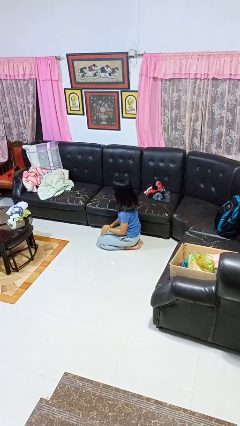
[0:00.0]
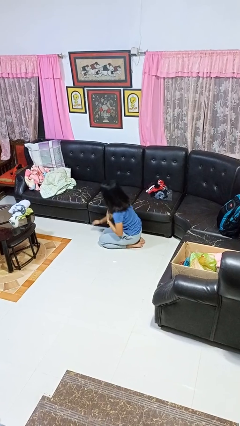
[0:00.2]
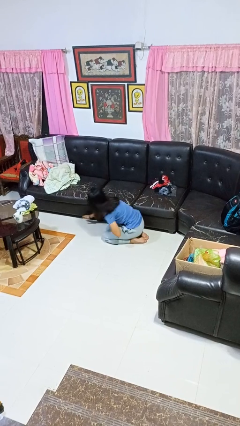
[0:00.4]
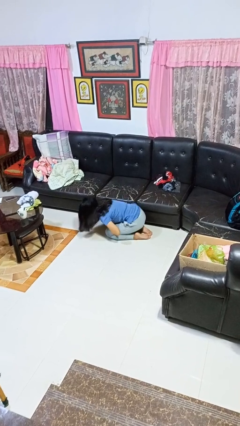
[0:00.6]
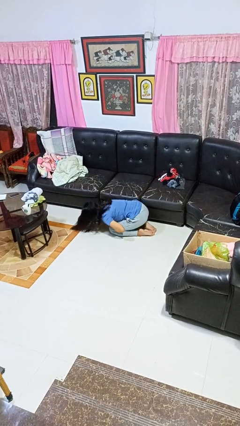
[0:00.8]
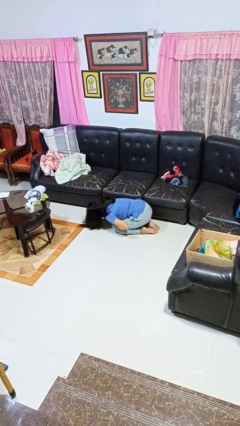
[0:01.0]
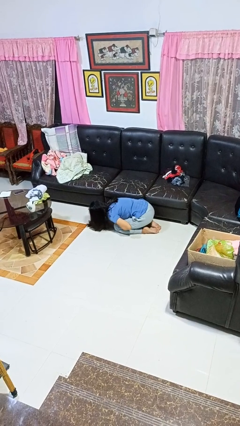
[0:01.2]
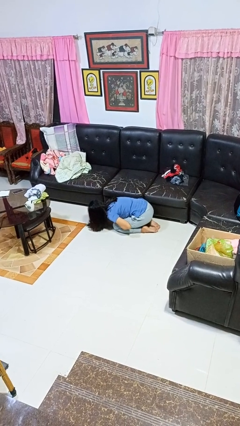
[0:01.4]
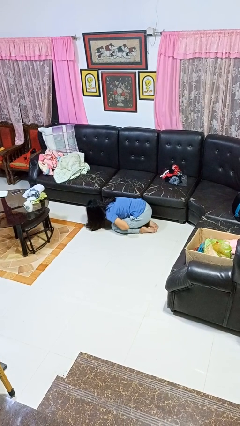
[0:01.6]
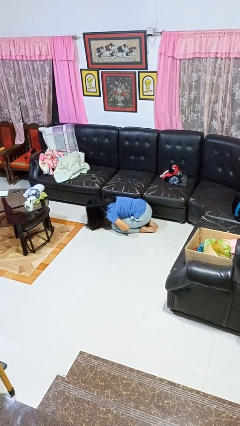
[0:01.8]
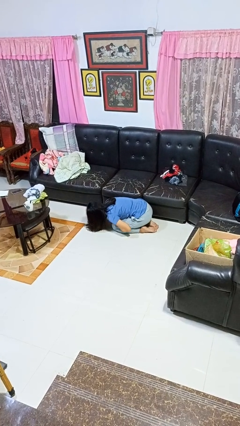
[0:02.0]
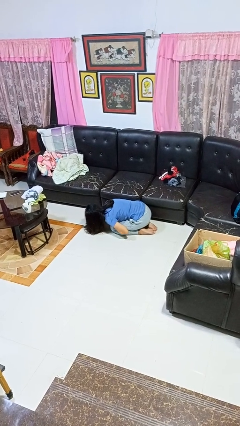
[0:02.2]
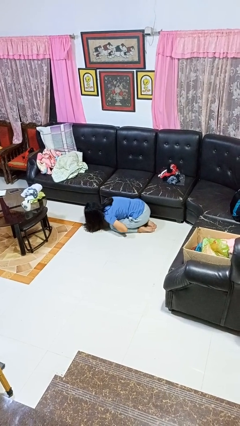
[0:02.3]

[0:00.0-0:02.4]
person searches under couch

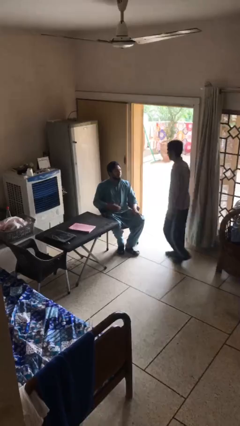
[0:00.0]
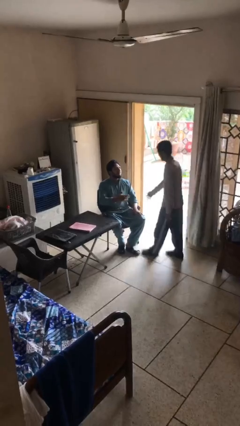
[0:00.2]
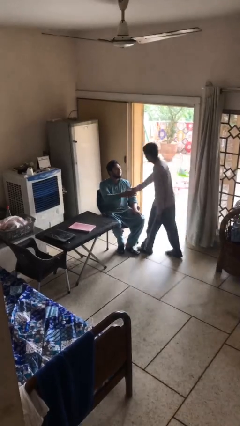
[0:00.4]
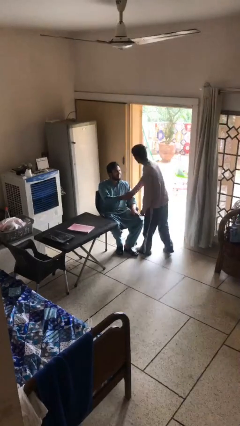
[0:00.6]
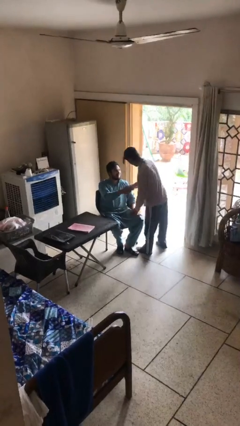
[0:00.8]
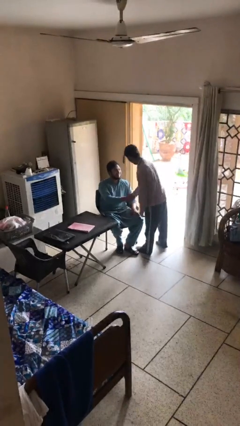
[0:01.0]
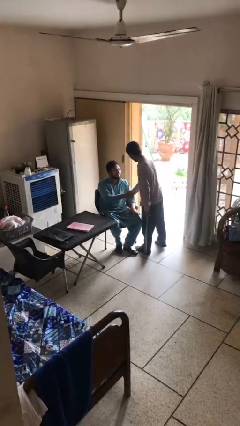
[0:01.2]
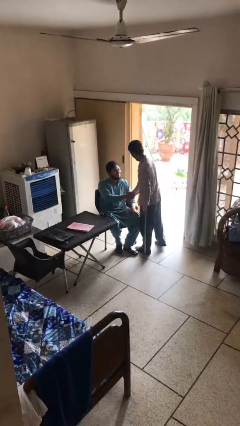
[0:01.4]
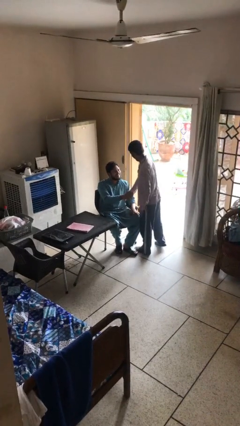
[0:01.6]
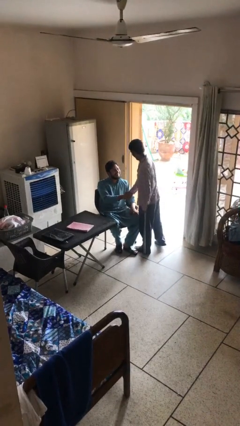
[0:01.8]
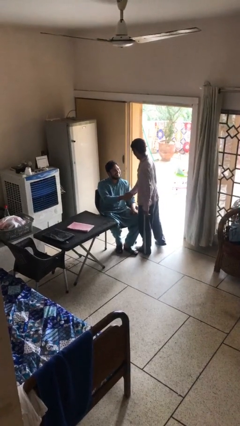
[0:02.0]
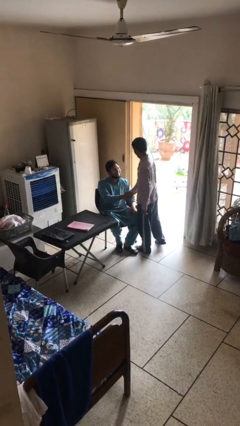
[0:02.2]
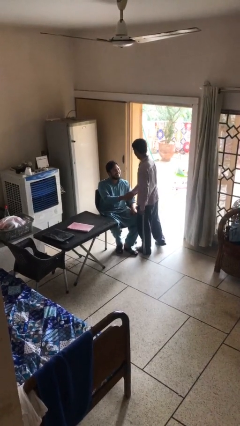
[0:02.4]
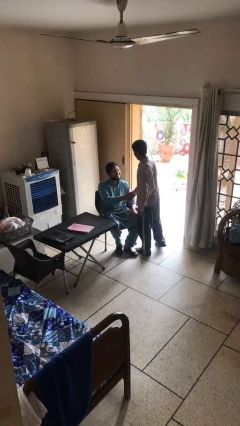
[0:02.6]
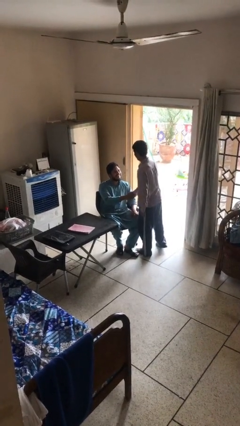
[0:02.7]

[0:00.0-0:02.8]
person shakes hand

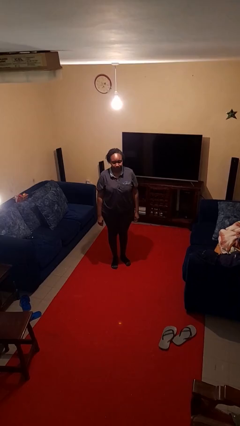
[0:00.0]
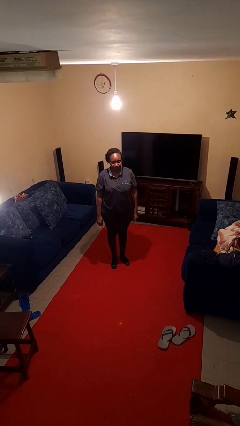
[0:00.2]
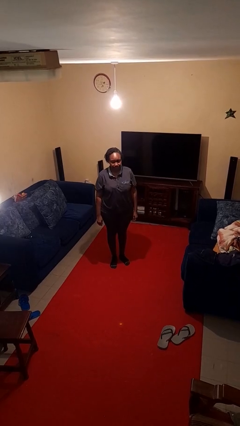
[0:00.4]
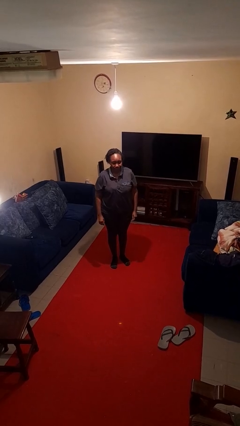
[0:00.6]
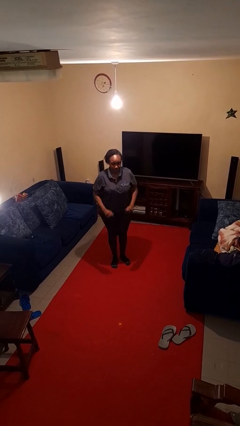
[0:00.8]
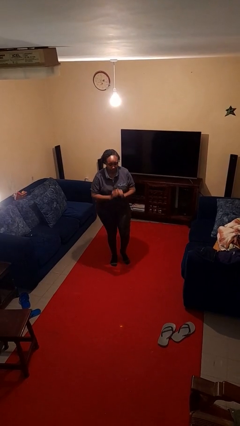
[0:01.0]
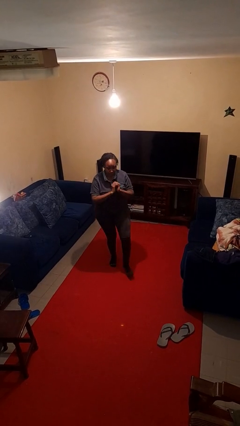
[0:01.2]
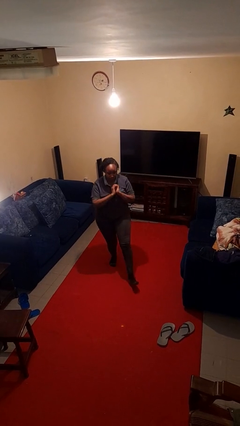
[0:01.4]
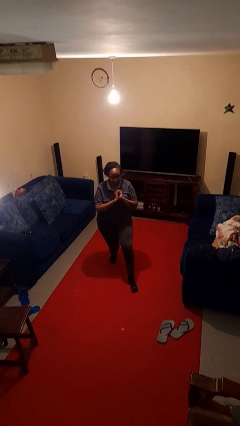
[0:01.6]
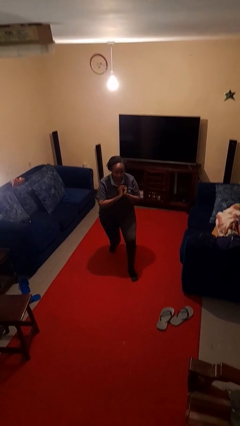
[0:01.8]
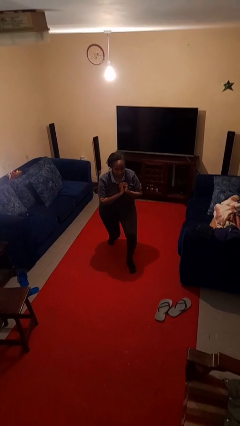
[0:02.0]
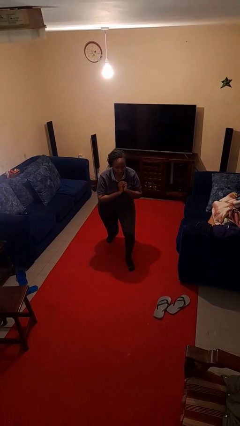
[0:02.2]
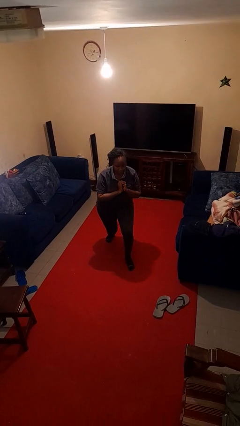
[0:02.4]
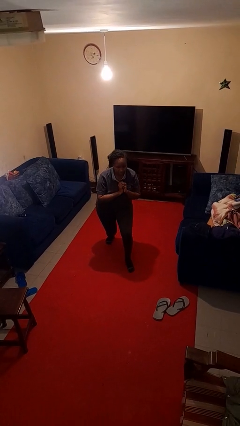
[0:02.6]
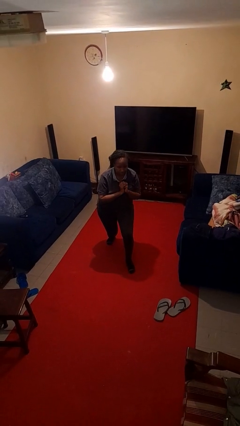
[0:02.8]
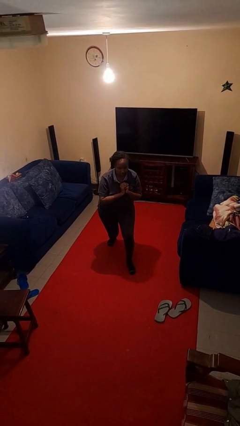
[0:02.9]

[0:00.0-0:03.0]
person exercises with lunges

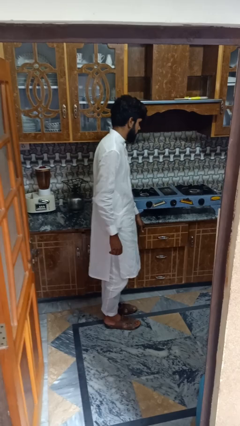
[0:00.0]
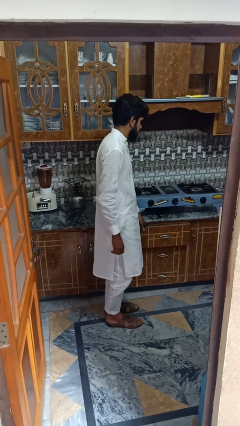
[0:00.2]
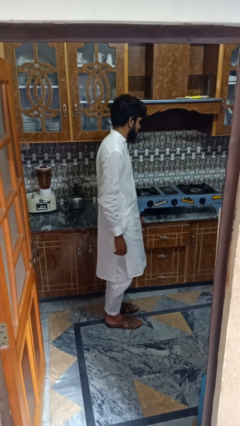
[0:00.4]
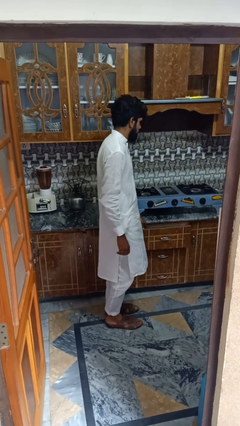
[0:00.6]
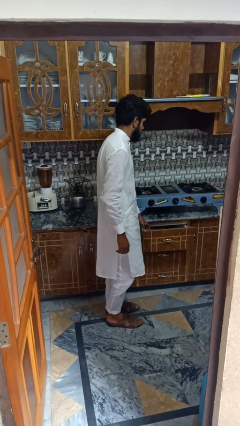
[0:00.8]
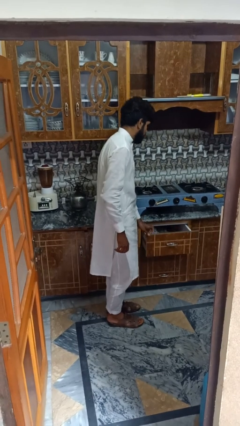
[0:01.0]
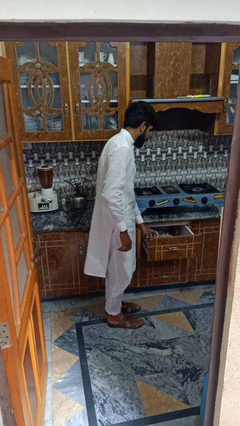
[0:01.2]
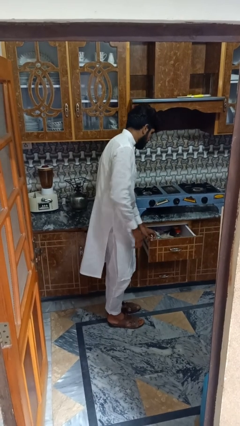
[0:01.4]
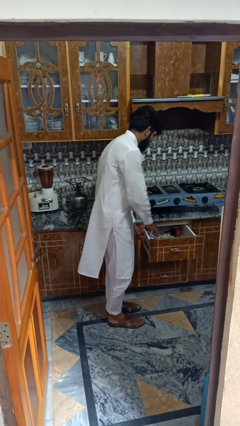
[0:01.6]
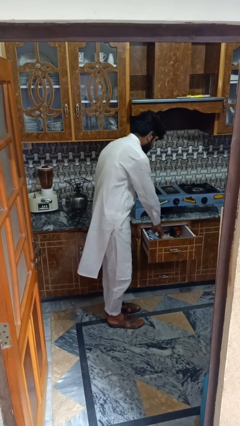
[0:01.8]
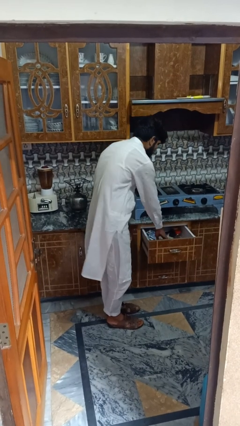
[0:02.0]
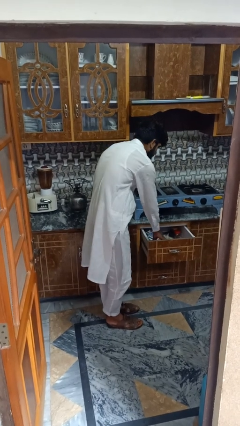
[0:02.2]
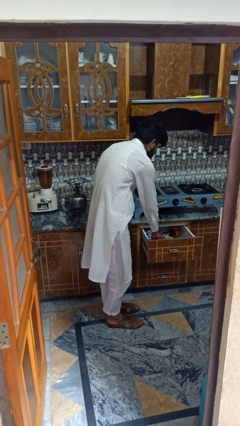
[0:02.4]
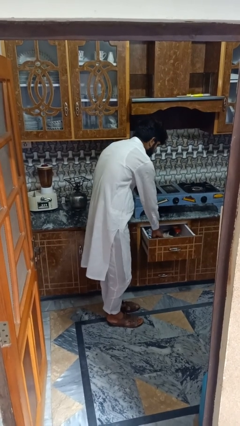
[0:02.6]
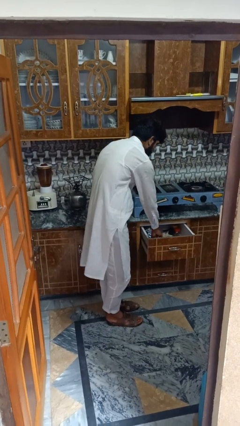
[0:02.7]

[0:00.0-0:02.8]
person searches in kitchen drawer

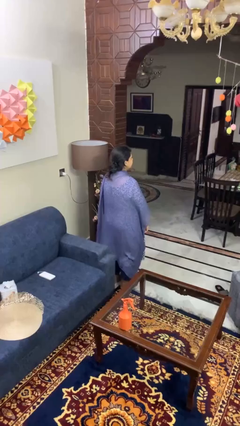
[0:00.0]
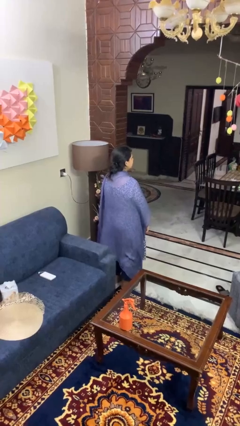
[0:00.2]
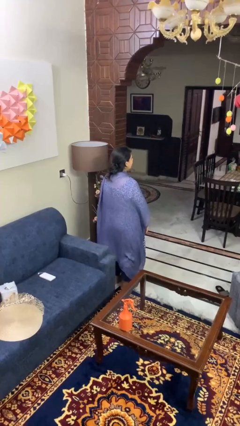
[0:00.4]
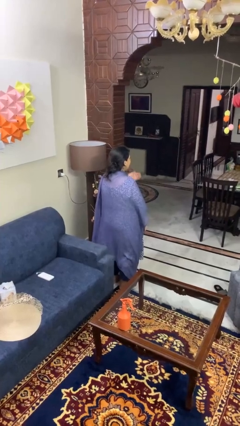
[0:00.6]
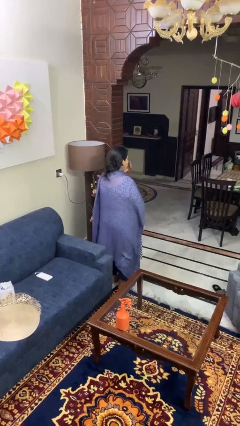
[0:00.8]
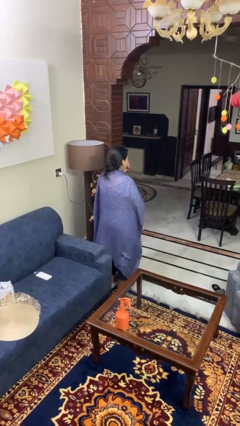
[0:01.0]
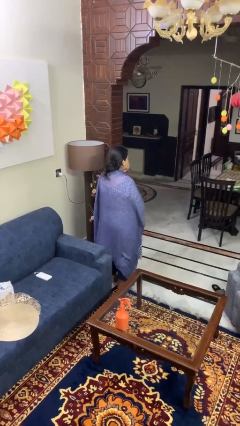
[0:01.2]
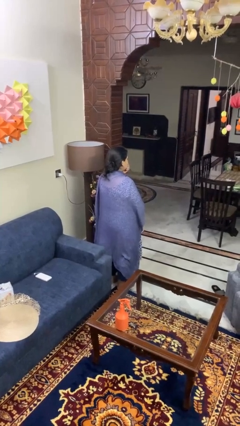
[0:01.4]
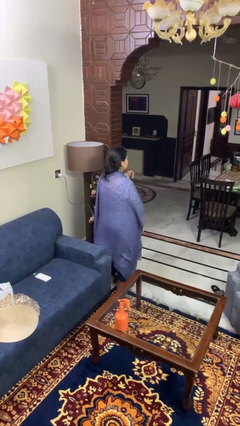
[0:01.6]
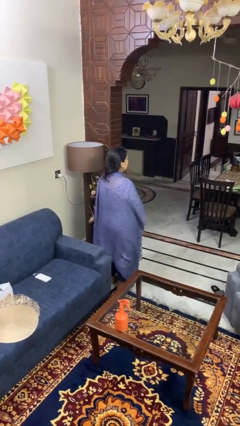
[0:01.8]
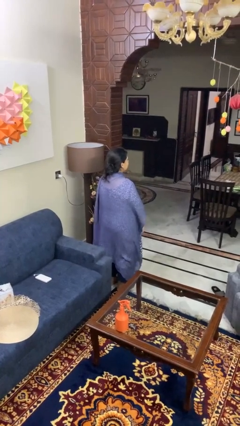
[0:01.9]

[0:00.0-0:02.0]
person yawns

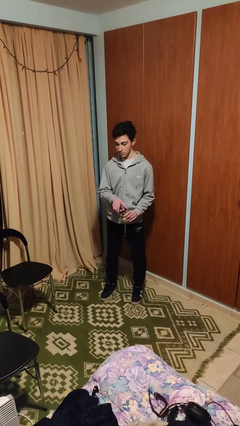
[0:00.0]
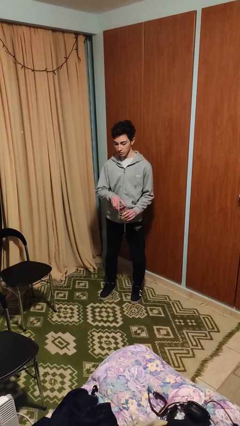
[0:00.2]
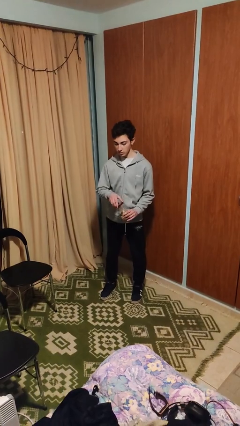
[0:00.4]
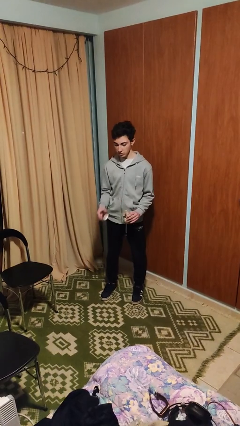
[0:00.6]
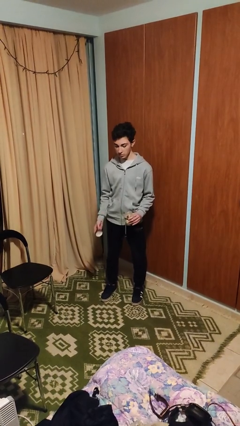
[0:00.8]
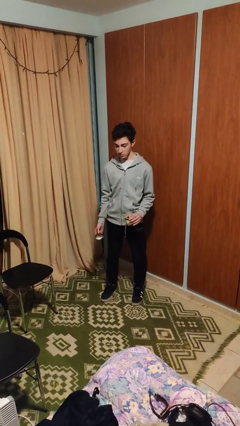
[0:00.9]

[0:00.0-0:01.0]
person opens jar

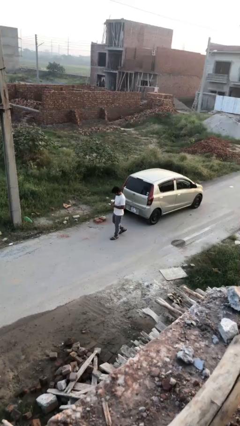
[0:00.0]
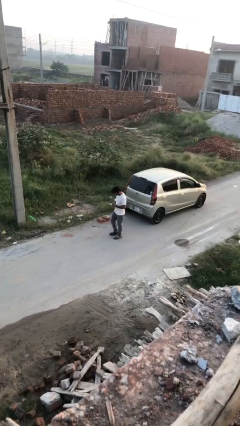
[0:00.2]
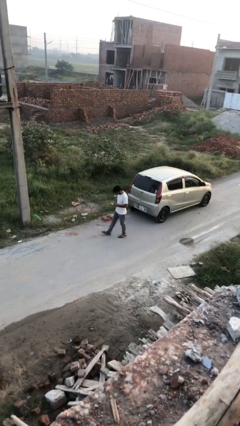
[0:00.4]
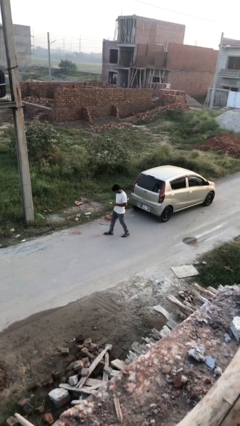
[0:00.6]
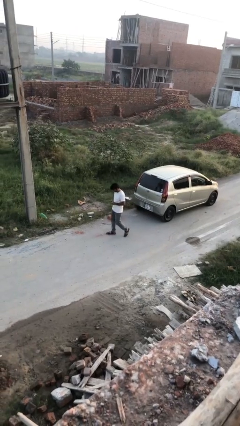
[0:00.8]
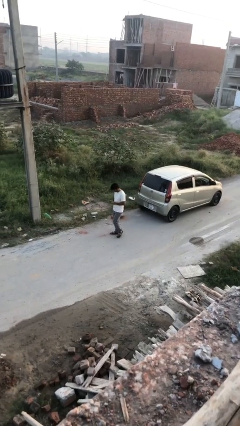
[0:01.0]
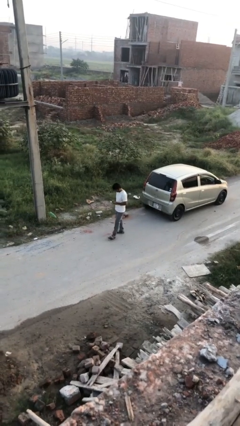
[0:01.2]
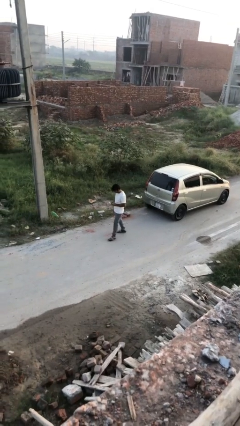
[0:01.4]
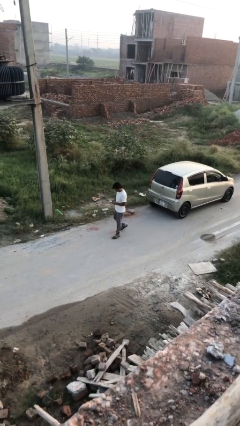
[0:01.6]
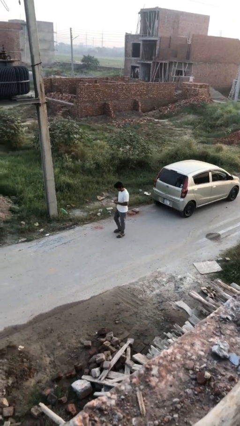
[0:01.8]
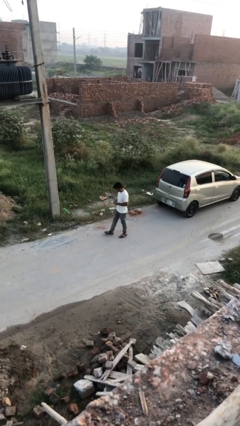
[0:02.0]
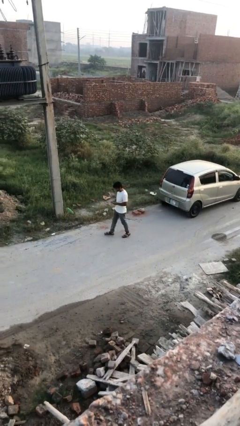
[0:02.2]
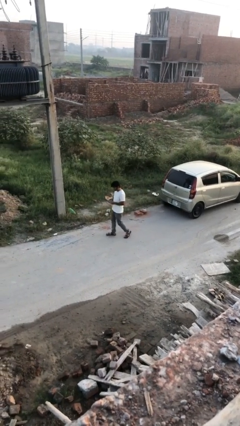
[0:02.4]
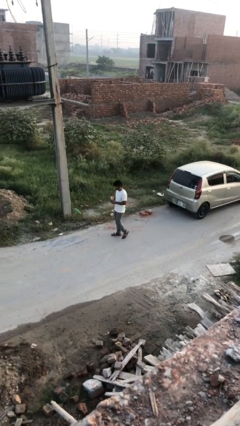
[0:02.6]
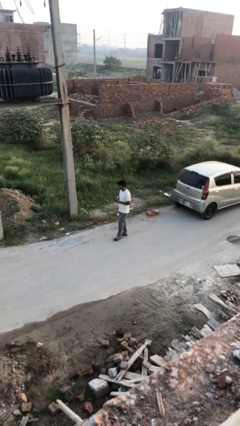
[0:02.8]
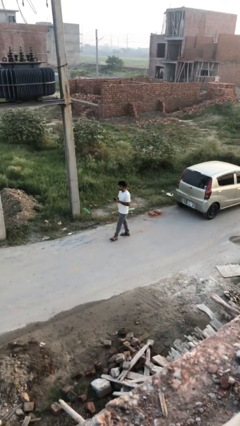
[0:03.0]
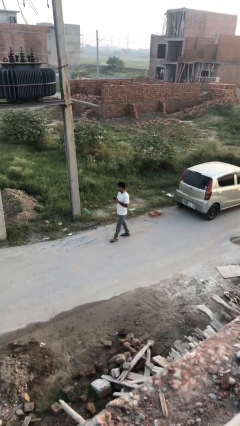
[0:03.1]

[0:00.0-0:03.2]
person texts on phone
